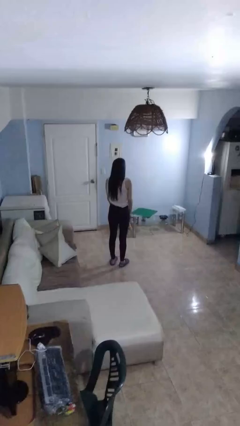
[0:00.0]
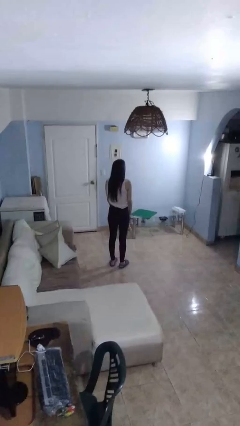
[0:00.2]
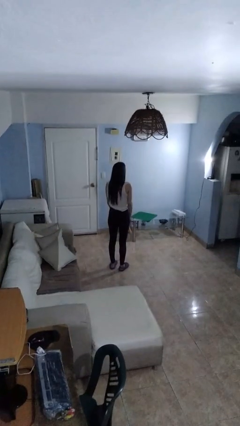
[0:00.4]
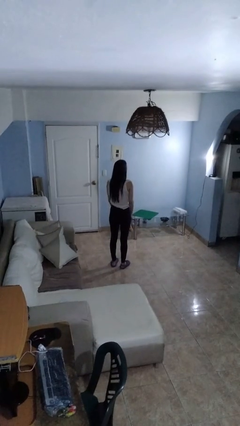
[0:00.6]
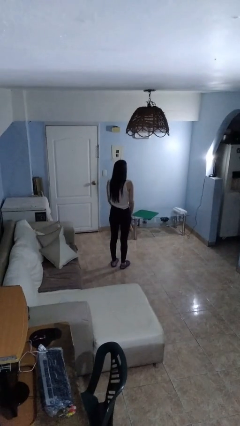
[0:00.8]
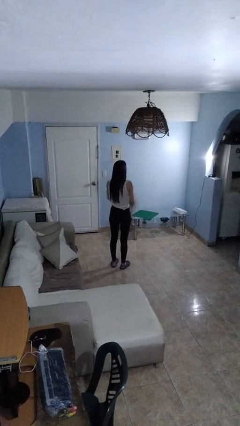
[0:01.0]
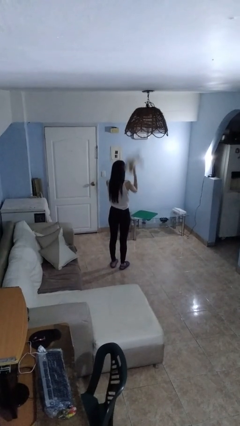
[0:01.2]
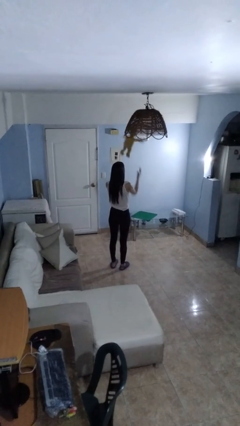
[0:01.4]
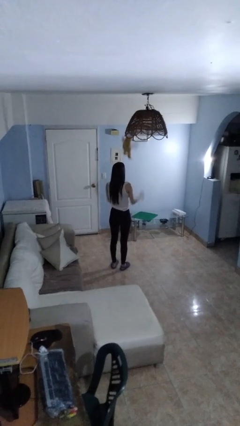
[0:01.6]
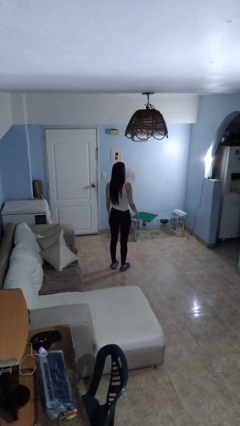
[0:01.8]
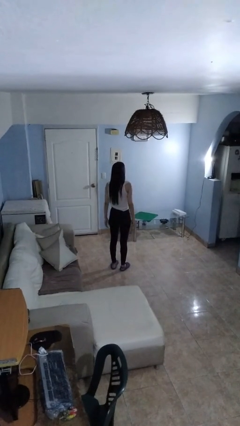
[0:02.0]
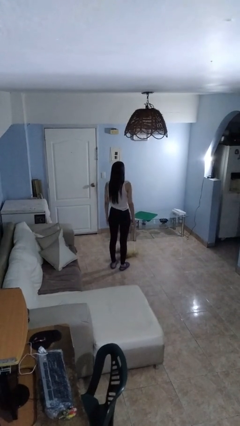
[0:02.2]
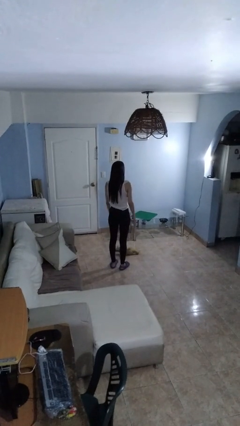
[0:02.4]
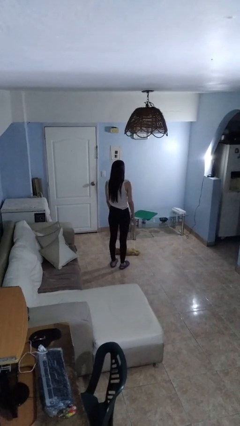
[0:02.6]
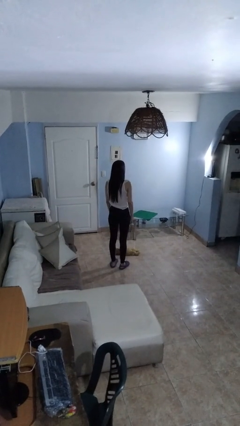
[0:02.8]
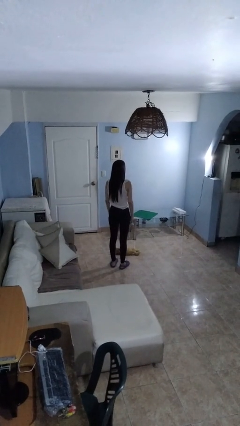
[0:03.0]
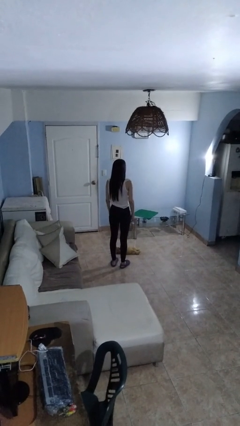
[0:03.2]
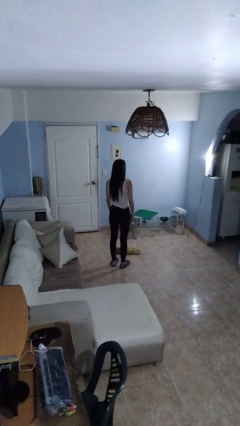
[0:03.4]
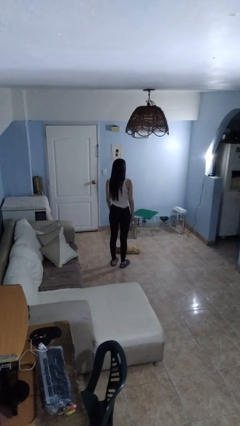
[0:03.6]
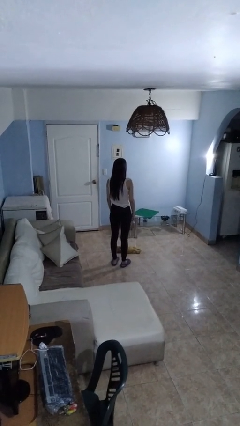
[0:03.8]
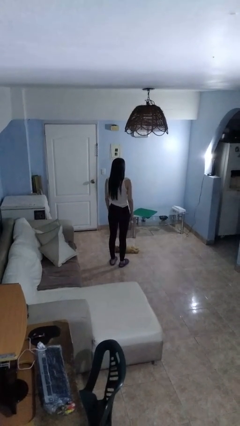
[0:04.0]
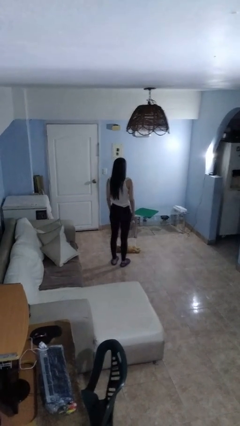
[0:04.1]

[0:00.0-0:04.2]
person throws object into air

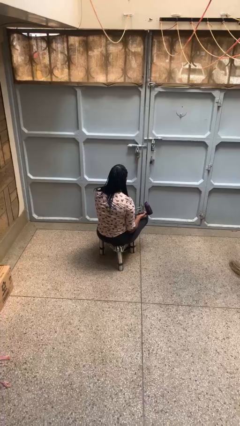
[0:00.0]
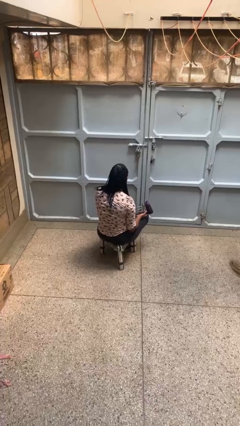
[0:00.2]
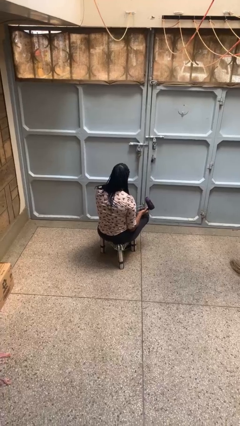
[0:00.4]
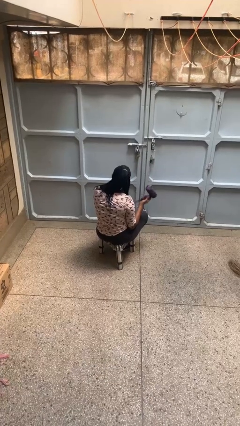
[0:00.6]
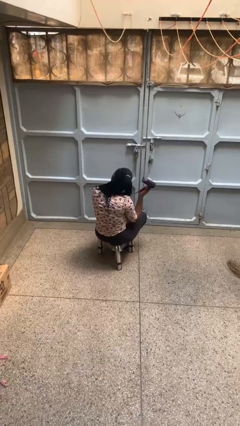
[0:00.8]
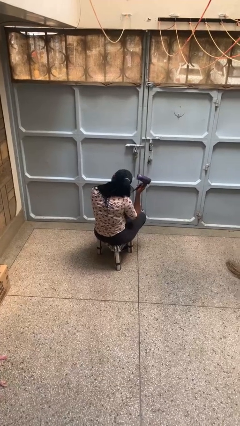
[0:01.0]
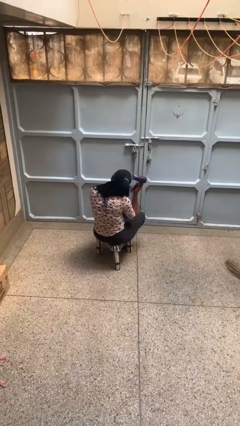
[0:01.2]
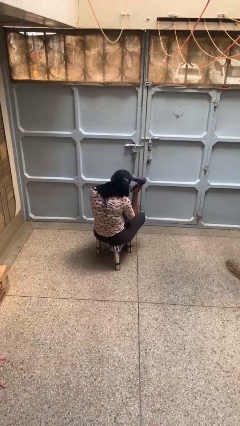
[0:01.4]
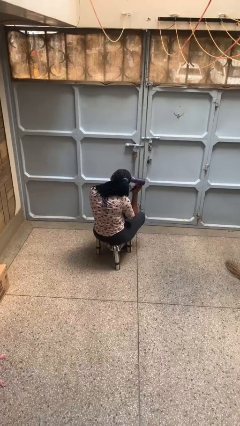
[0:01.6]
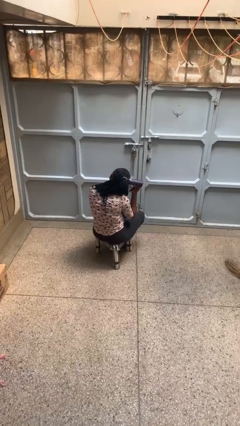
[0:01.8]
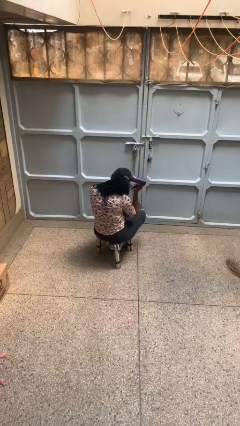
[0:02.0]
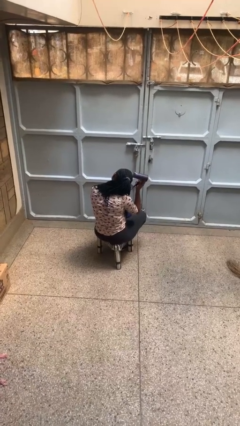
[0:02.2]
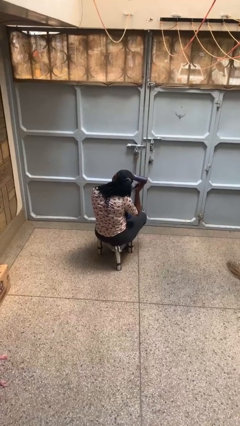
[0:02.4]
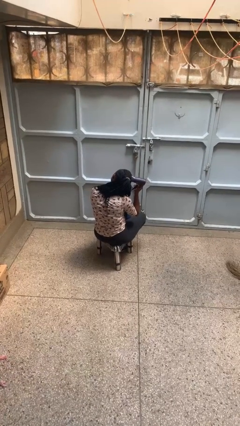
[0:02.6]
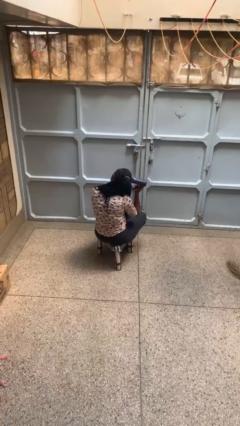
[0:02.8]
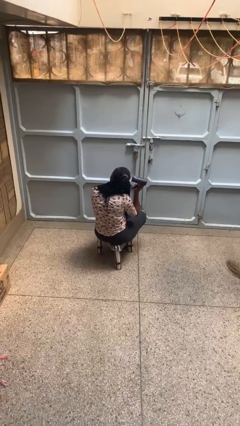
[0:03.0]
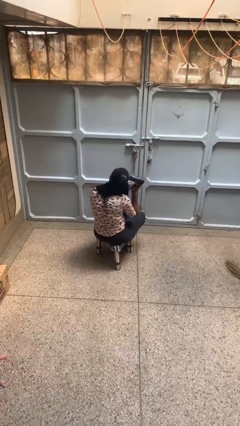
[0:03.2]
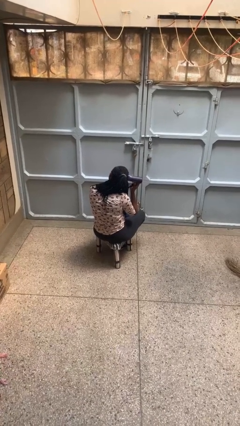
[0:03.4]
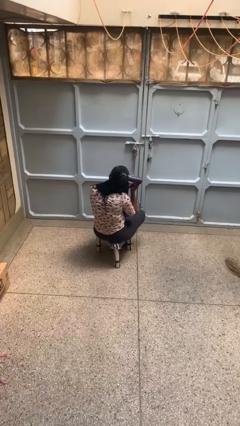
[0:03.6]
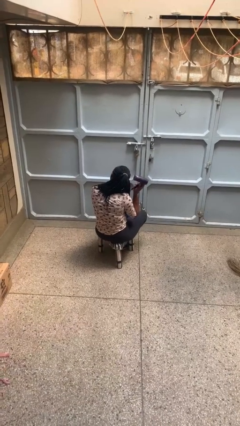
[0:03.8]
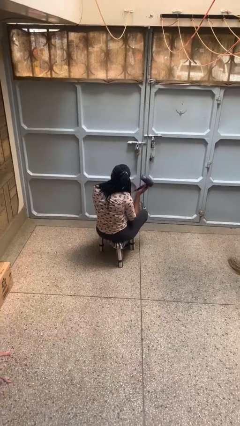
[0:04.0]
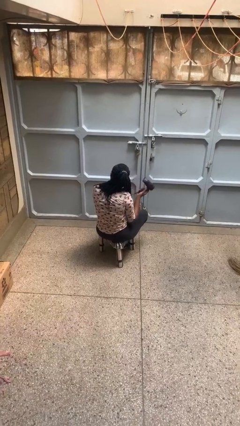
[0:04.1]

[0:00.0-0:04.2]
person dries hair with hairdryer

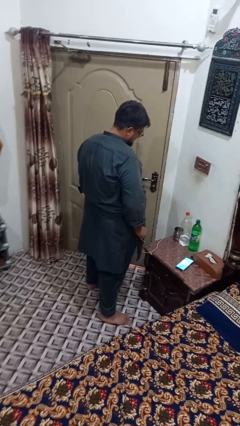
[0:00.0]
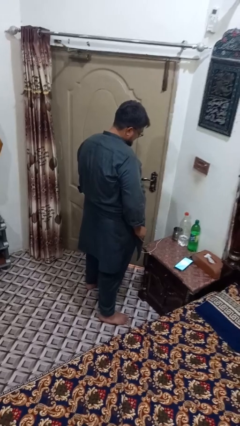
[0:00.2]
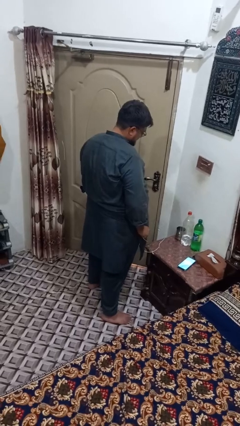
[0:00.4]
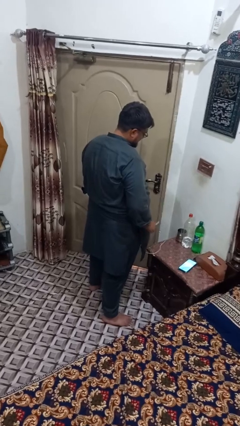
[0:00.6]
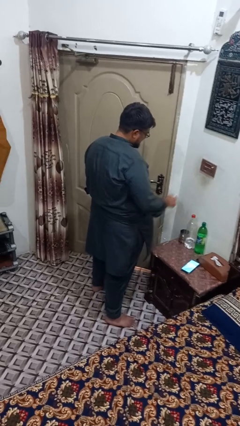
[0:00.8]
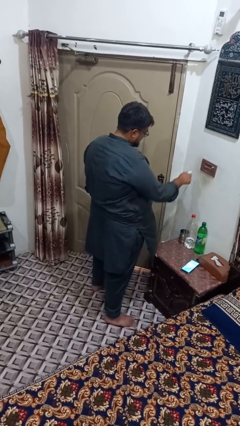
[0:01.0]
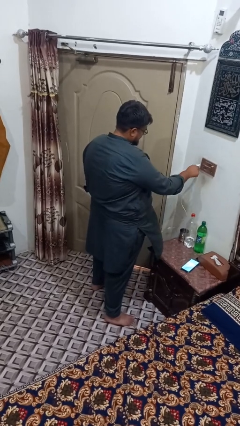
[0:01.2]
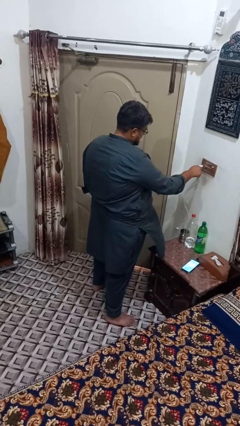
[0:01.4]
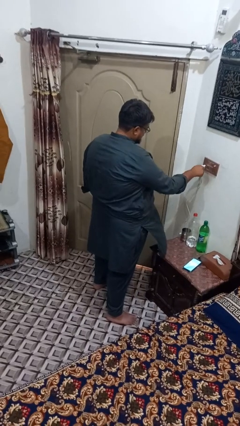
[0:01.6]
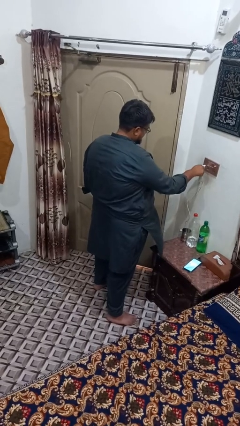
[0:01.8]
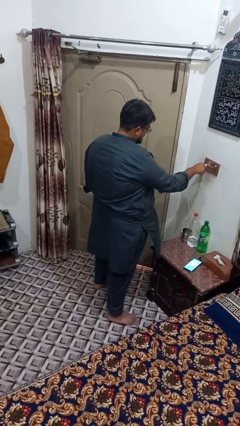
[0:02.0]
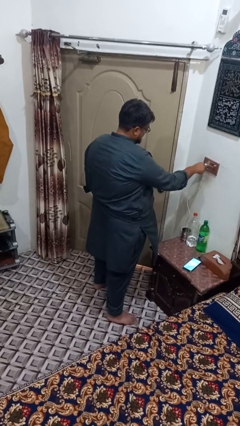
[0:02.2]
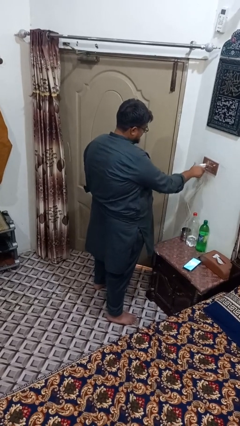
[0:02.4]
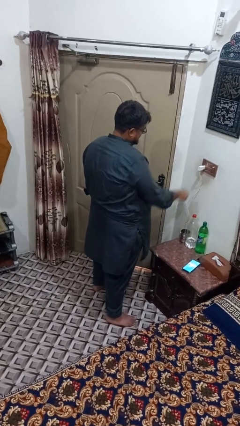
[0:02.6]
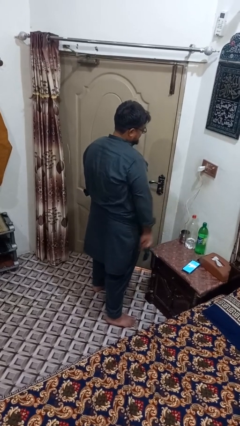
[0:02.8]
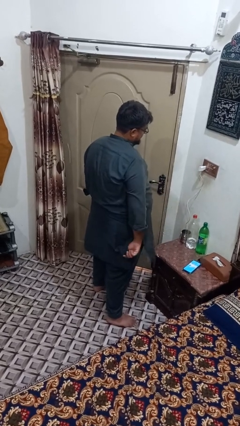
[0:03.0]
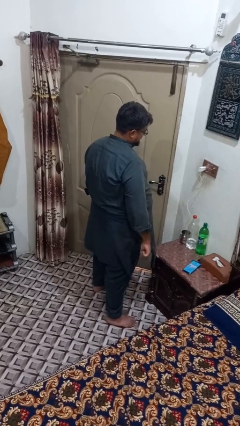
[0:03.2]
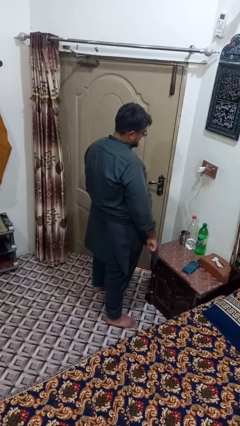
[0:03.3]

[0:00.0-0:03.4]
person plugs into electrical socket

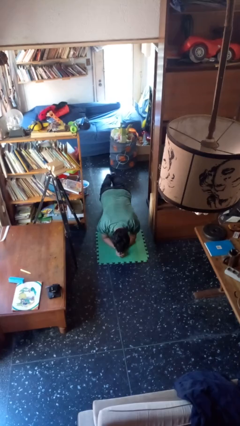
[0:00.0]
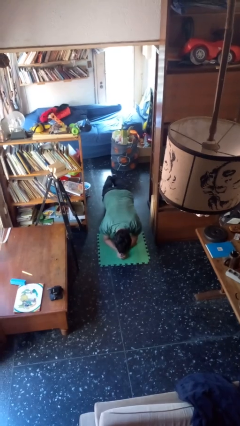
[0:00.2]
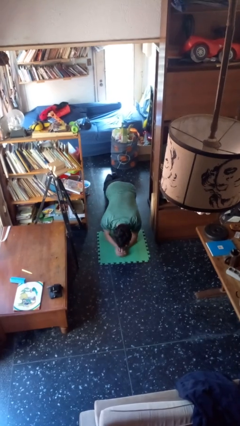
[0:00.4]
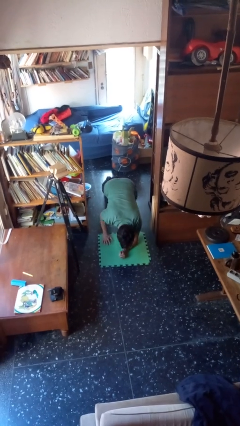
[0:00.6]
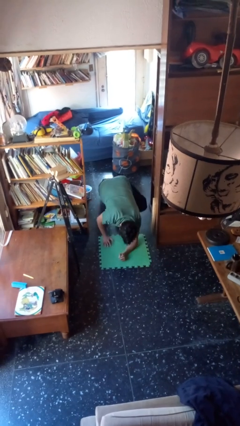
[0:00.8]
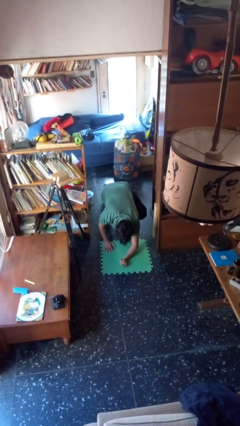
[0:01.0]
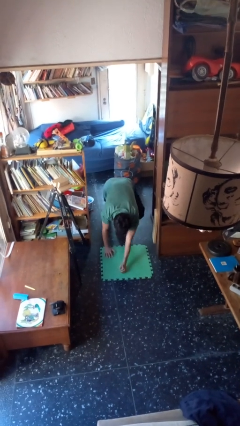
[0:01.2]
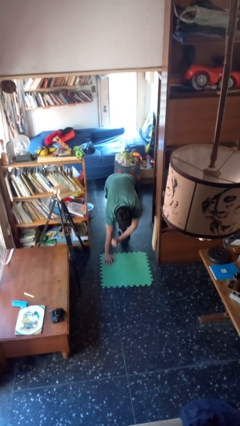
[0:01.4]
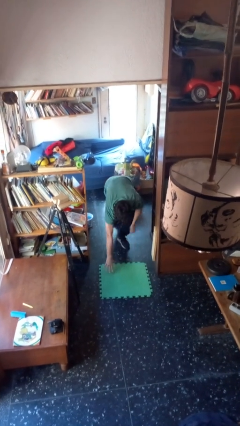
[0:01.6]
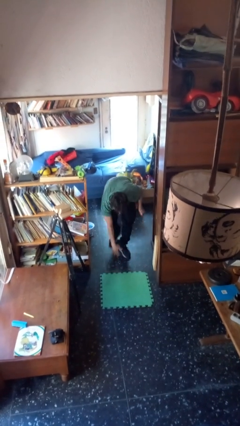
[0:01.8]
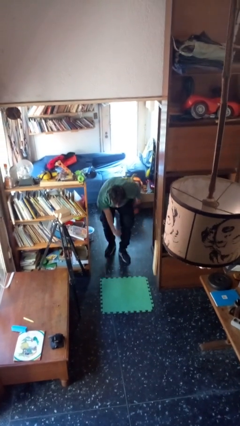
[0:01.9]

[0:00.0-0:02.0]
person stands up from floor

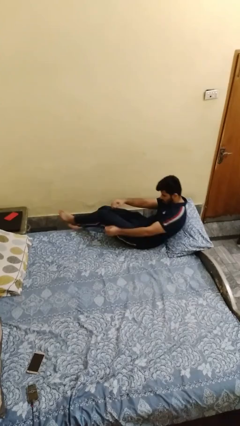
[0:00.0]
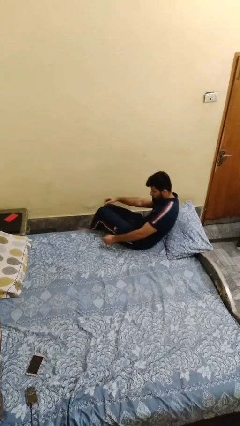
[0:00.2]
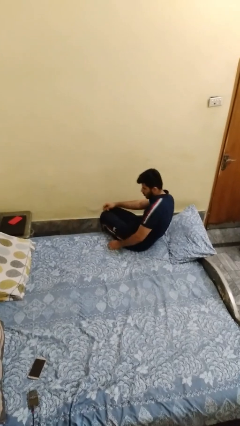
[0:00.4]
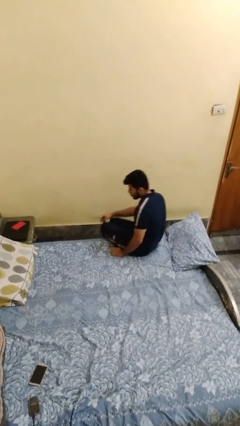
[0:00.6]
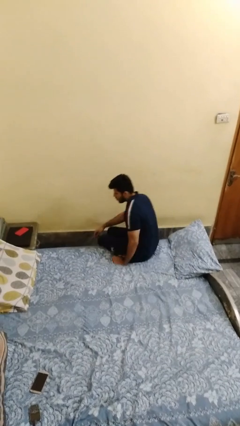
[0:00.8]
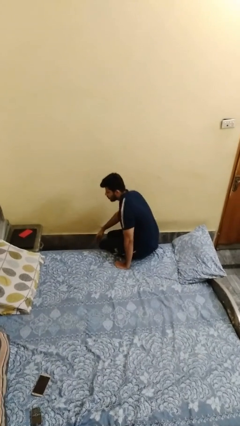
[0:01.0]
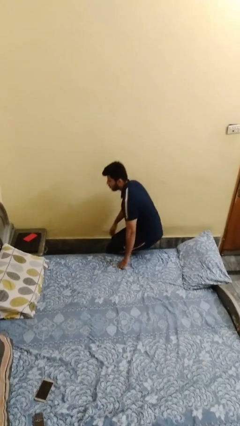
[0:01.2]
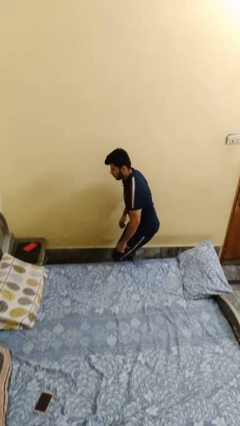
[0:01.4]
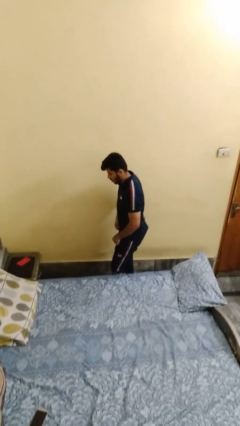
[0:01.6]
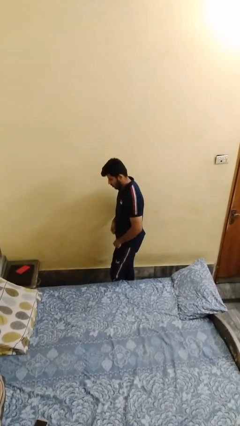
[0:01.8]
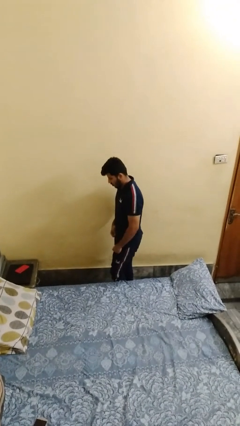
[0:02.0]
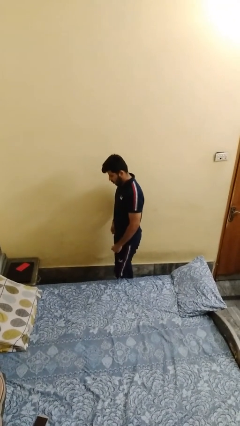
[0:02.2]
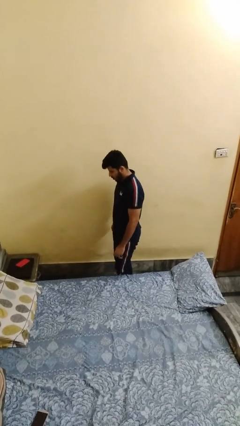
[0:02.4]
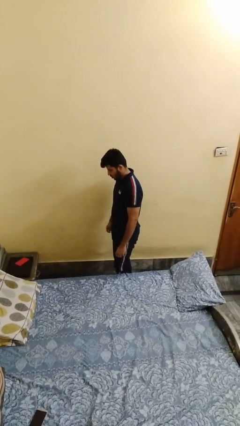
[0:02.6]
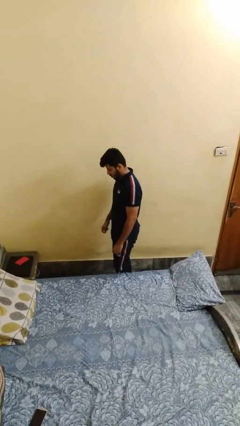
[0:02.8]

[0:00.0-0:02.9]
person stands up

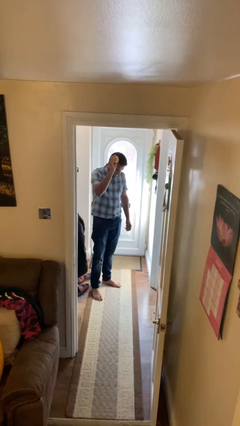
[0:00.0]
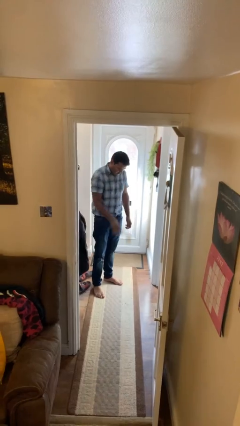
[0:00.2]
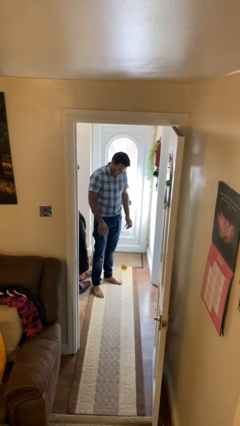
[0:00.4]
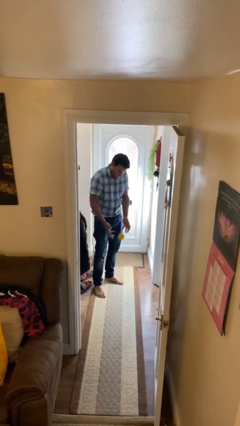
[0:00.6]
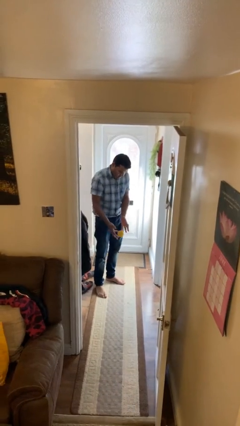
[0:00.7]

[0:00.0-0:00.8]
person bounces ball on floor

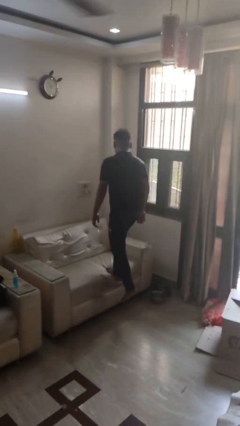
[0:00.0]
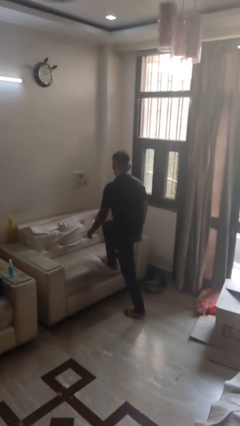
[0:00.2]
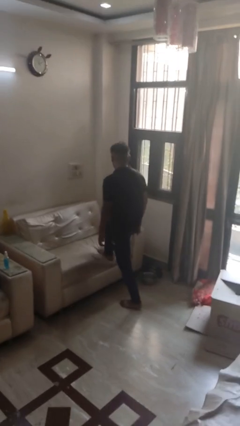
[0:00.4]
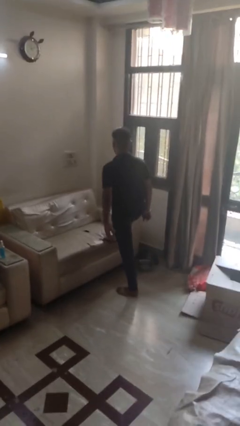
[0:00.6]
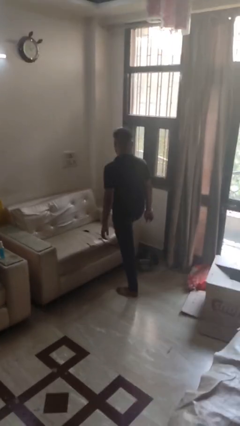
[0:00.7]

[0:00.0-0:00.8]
person climbs off couch
